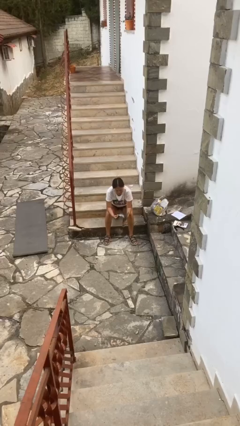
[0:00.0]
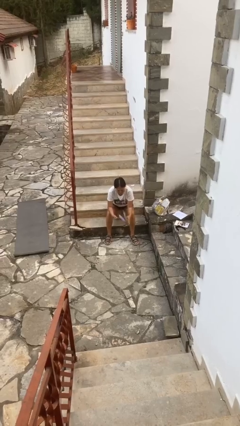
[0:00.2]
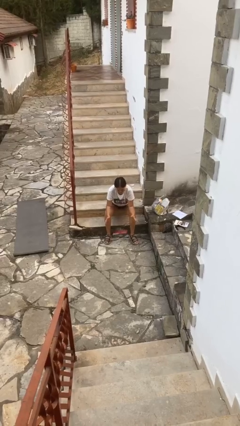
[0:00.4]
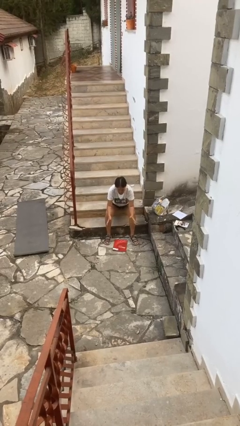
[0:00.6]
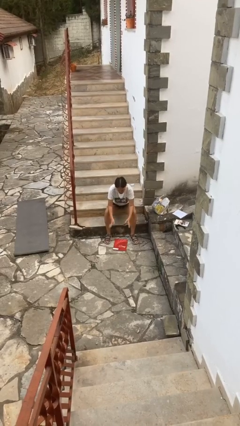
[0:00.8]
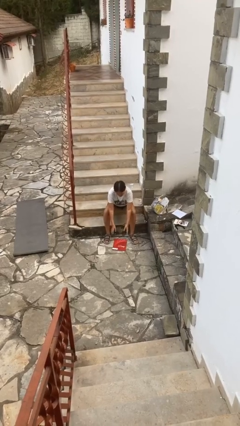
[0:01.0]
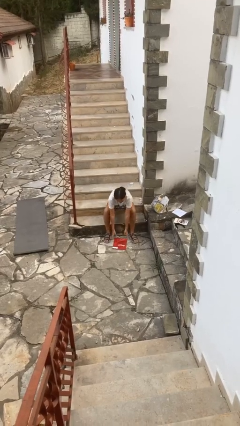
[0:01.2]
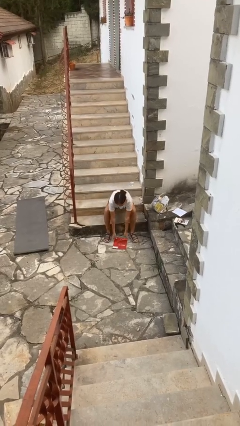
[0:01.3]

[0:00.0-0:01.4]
person drops object

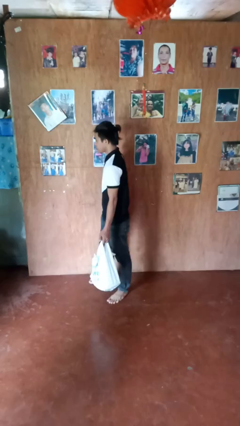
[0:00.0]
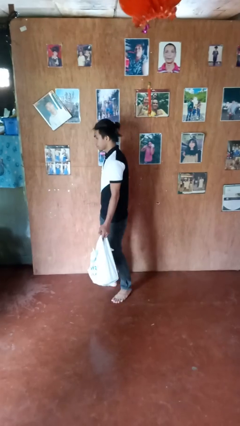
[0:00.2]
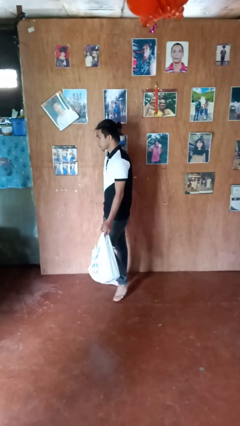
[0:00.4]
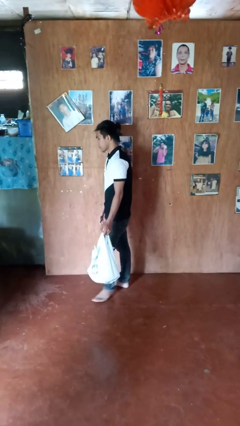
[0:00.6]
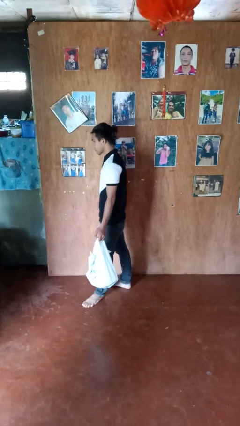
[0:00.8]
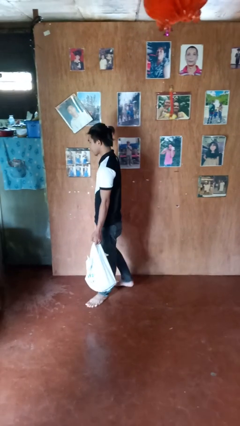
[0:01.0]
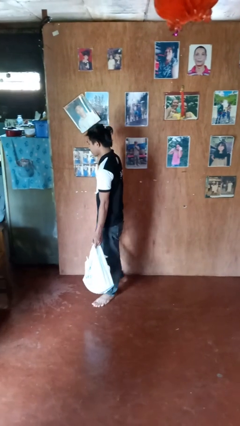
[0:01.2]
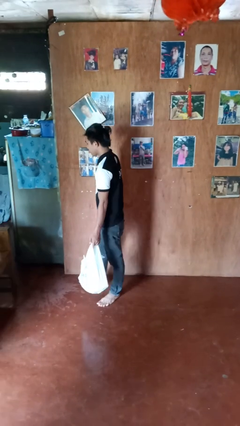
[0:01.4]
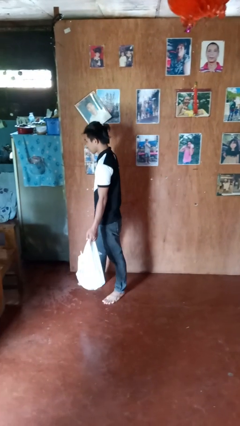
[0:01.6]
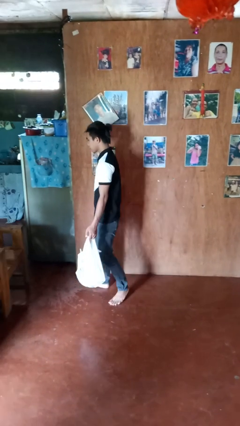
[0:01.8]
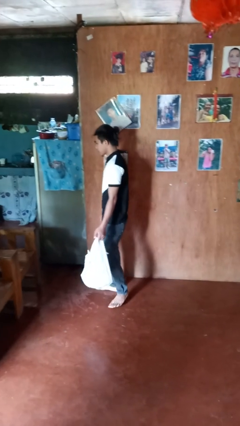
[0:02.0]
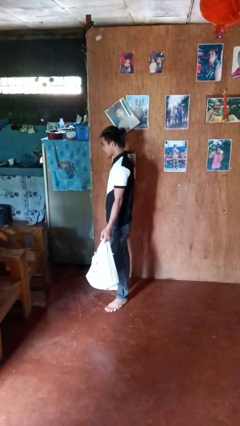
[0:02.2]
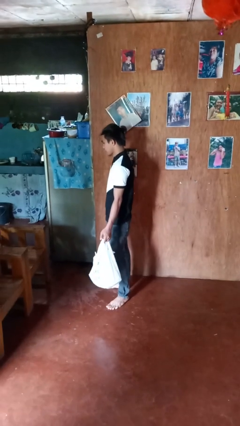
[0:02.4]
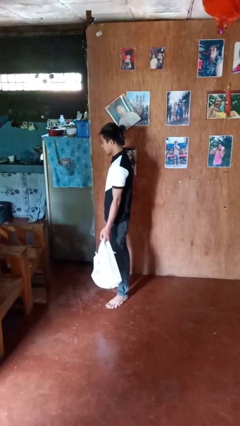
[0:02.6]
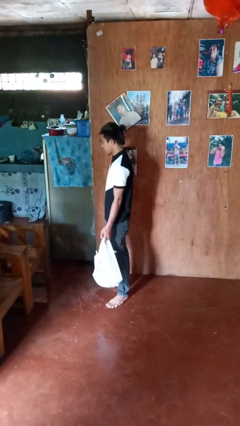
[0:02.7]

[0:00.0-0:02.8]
person carries groceries

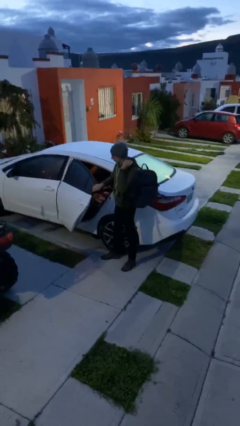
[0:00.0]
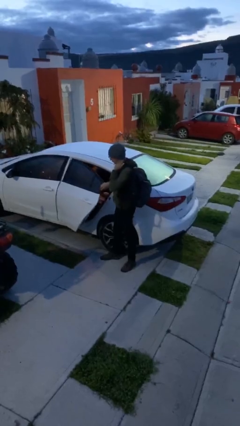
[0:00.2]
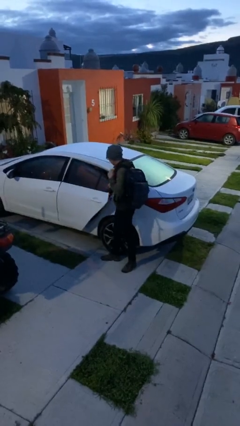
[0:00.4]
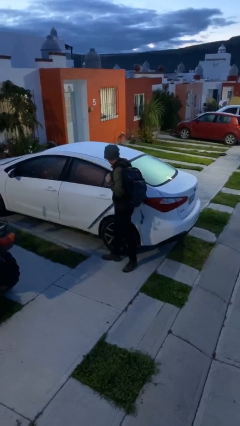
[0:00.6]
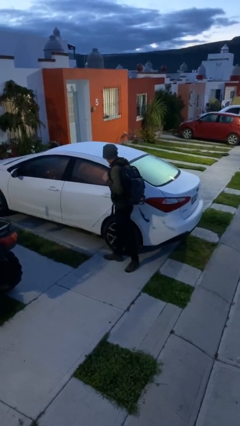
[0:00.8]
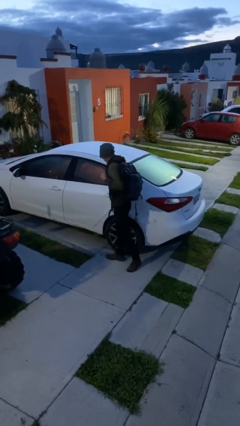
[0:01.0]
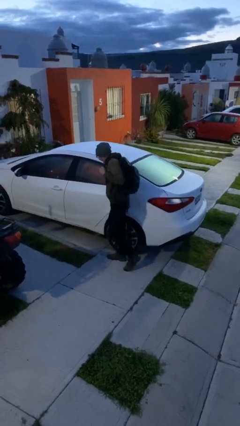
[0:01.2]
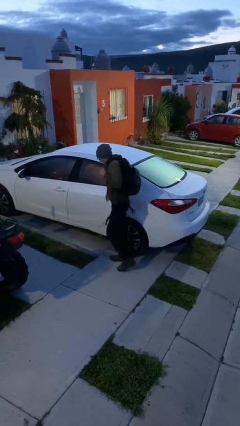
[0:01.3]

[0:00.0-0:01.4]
person closes car door

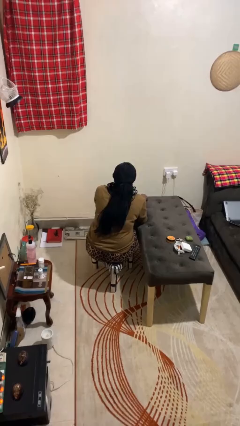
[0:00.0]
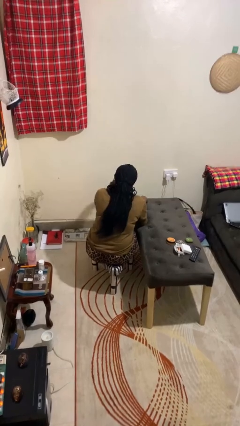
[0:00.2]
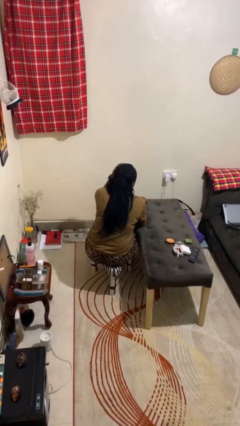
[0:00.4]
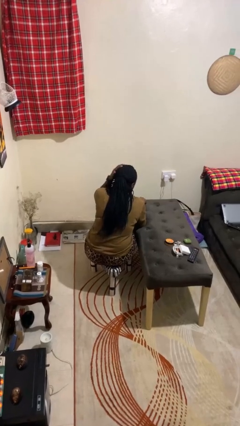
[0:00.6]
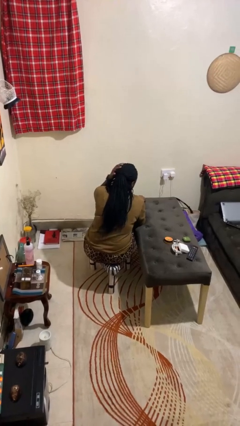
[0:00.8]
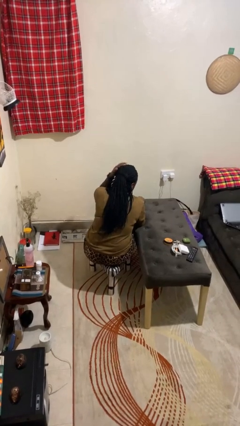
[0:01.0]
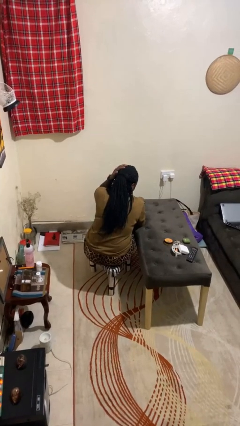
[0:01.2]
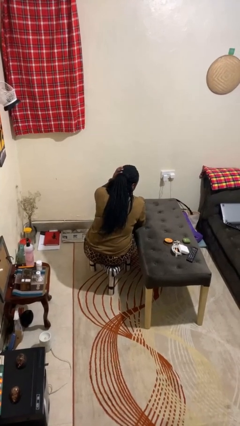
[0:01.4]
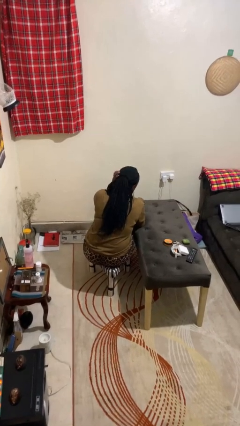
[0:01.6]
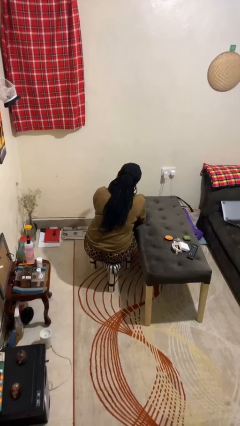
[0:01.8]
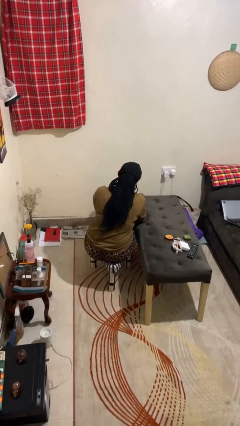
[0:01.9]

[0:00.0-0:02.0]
person strokes hair

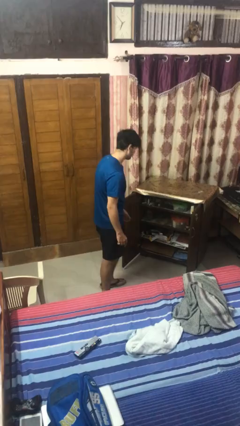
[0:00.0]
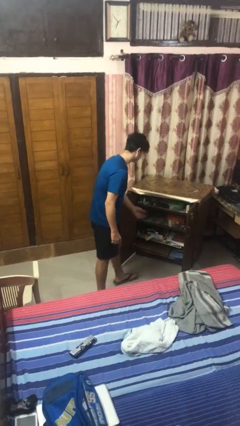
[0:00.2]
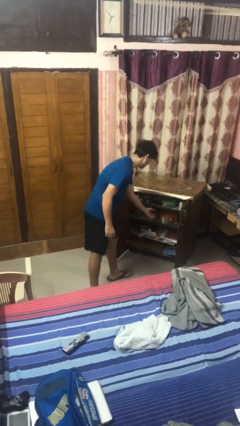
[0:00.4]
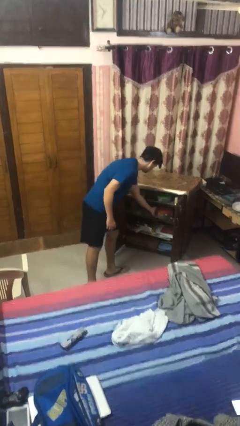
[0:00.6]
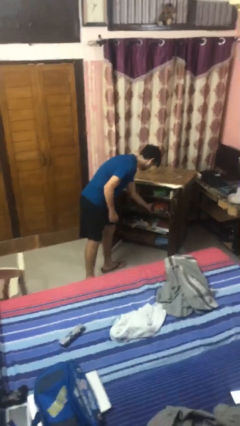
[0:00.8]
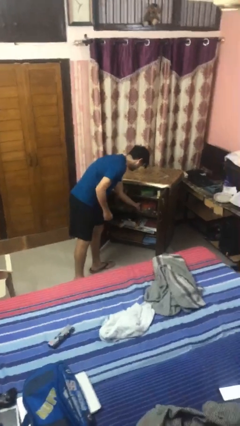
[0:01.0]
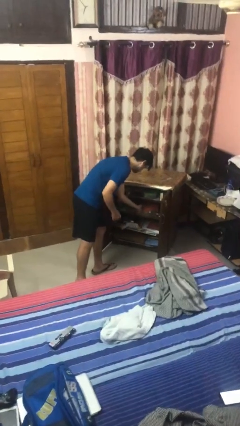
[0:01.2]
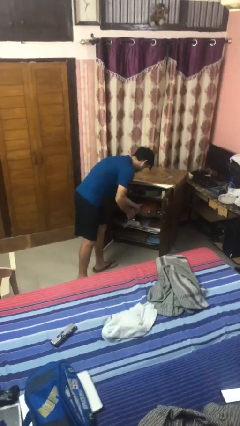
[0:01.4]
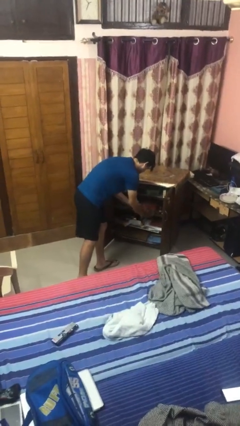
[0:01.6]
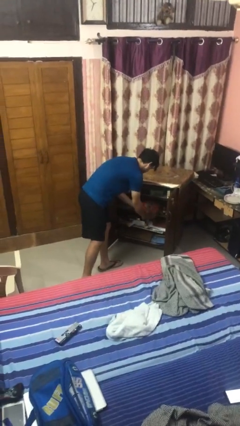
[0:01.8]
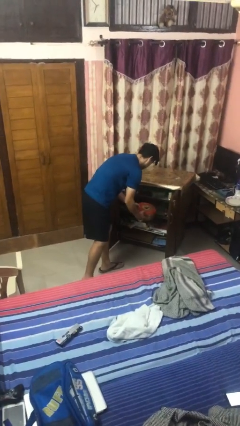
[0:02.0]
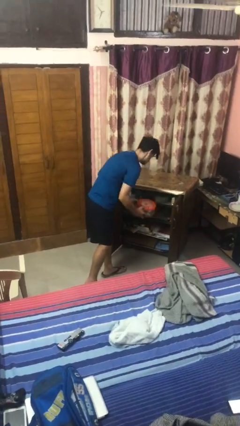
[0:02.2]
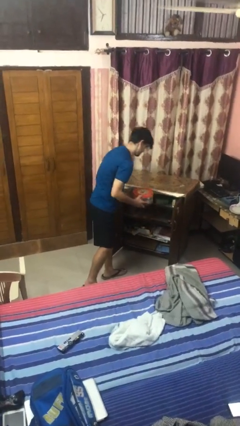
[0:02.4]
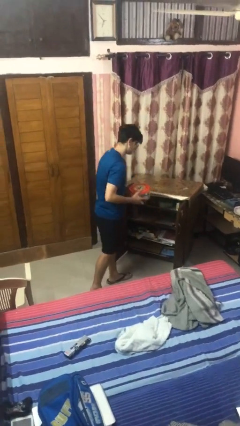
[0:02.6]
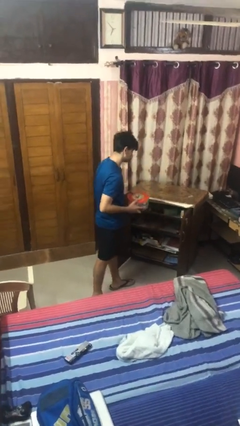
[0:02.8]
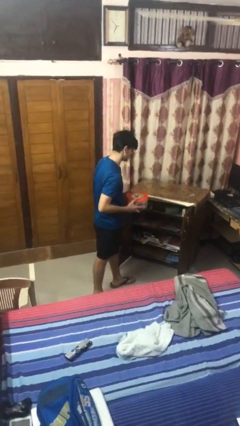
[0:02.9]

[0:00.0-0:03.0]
person picks up object from cabinet

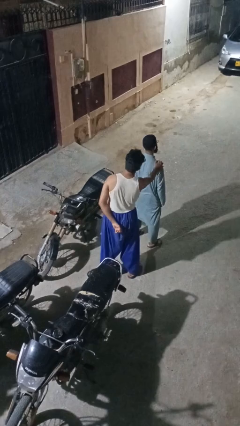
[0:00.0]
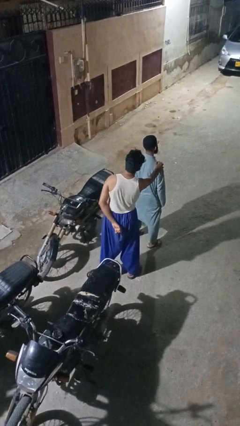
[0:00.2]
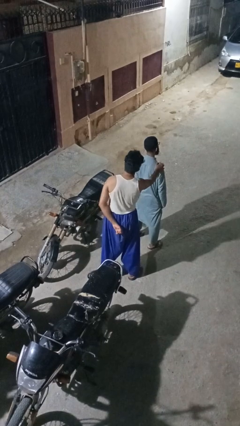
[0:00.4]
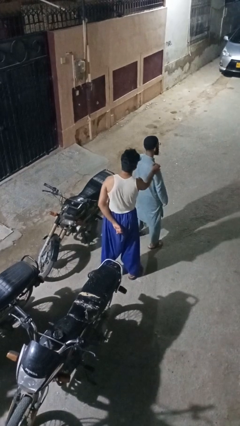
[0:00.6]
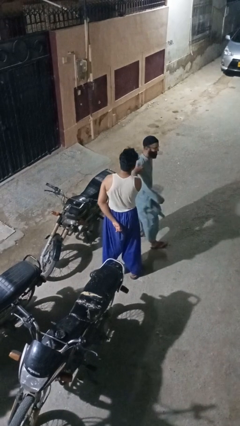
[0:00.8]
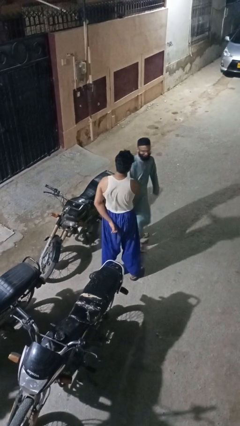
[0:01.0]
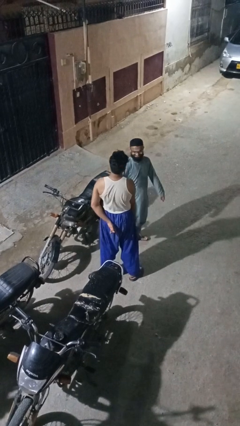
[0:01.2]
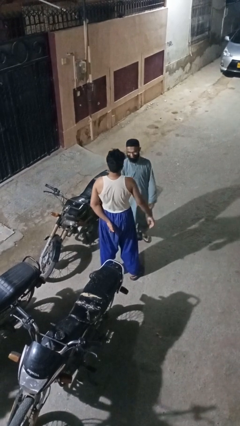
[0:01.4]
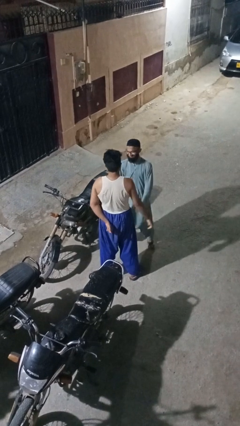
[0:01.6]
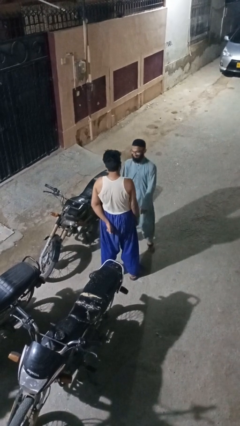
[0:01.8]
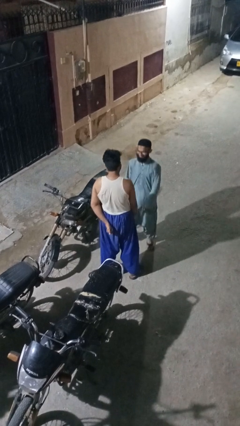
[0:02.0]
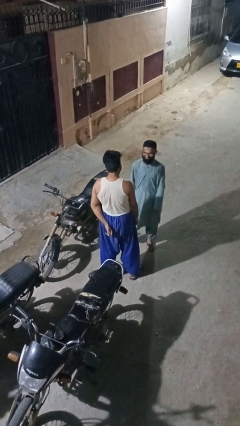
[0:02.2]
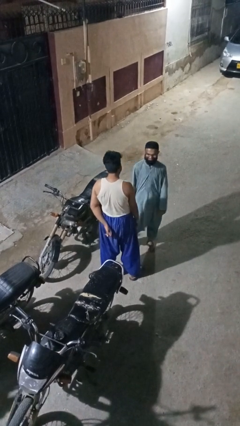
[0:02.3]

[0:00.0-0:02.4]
person spins person around

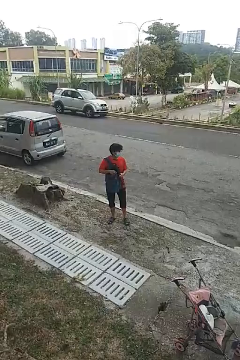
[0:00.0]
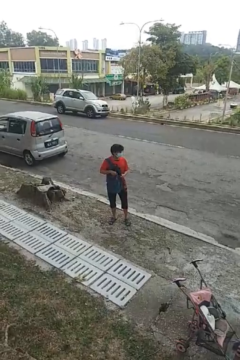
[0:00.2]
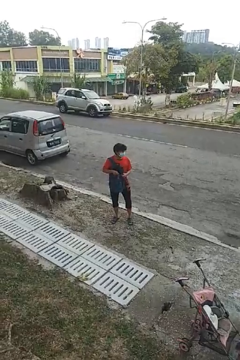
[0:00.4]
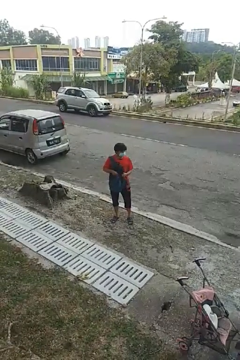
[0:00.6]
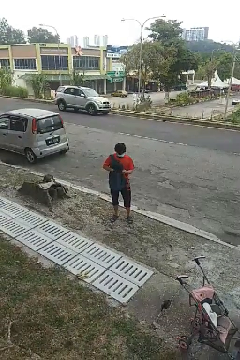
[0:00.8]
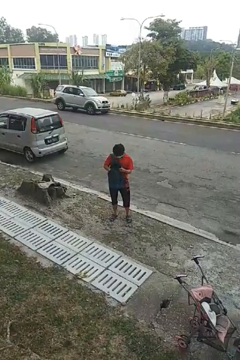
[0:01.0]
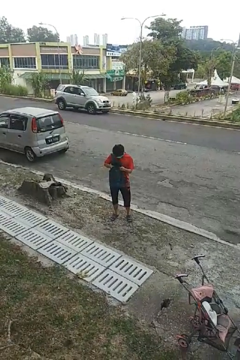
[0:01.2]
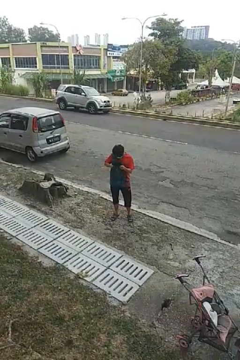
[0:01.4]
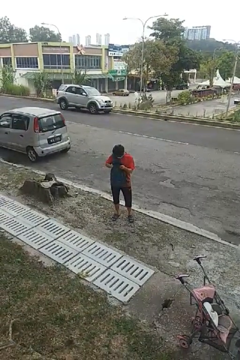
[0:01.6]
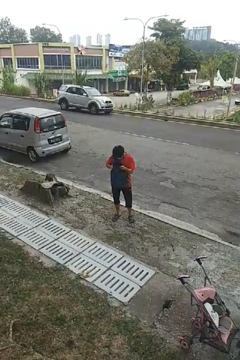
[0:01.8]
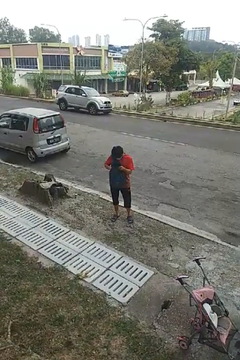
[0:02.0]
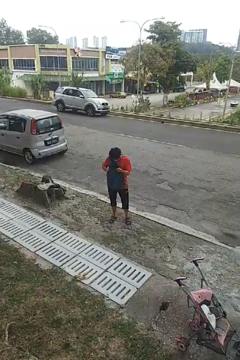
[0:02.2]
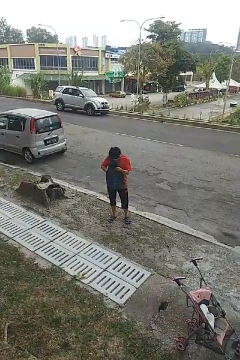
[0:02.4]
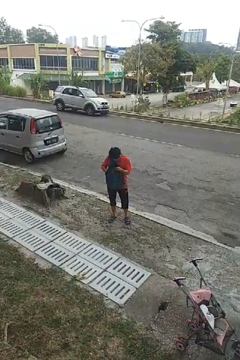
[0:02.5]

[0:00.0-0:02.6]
person searches in backpack

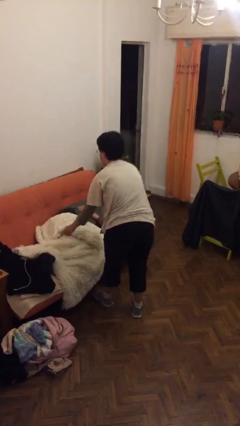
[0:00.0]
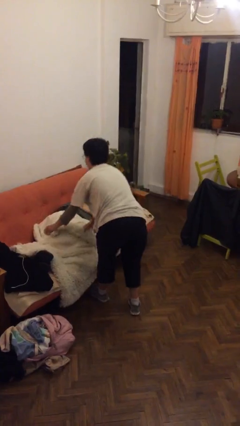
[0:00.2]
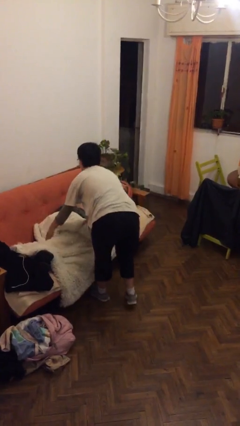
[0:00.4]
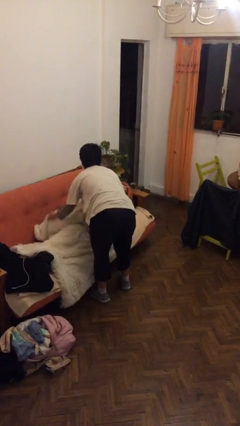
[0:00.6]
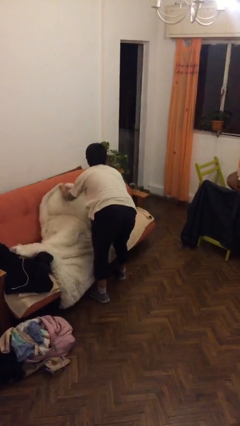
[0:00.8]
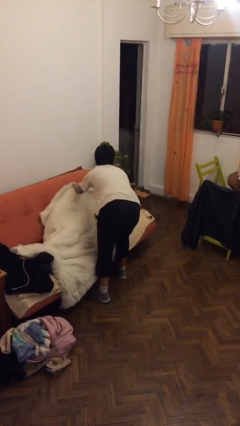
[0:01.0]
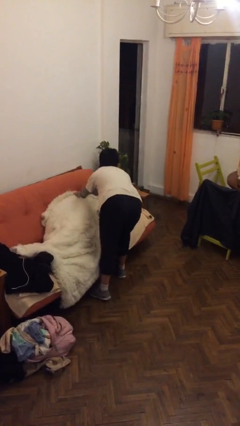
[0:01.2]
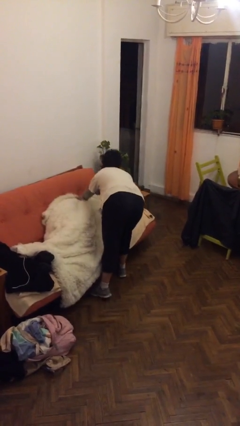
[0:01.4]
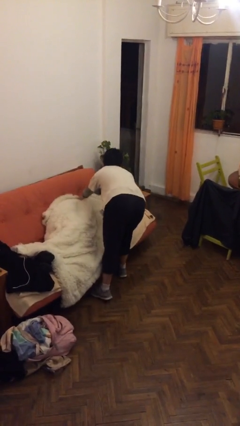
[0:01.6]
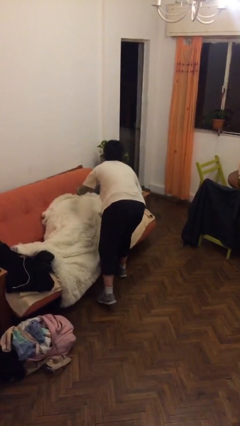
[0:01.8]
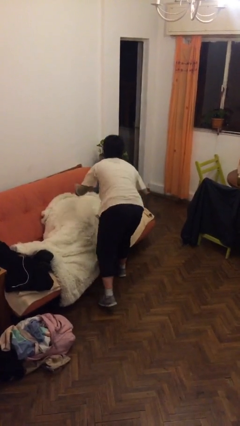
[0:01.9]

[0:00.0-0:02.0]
person covers friend with blanket
